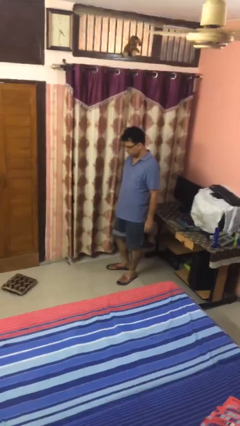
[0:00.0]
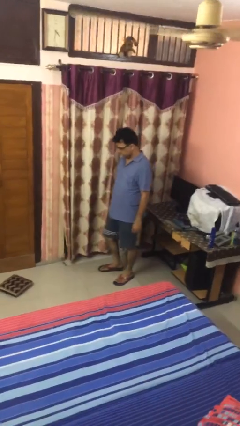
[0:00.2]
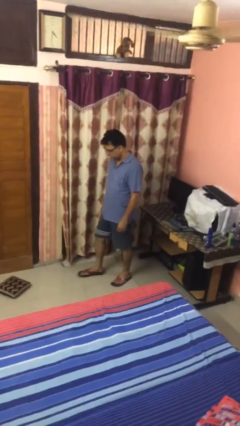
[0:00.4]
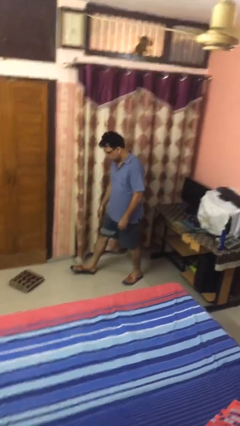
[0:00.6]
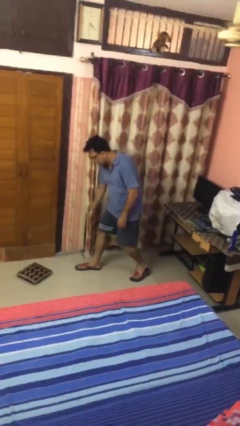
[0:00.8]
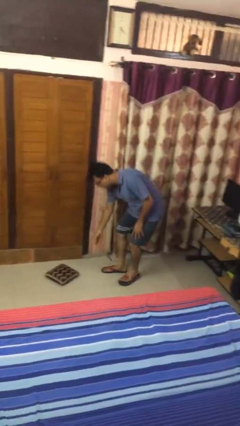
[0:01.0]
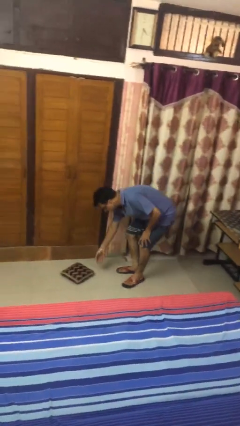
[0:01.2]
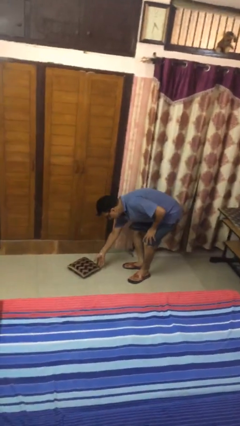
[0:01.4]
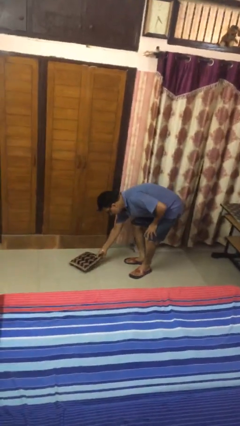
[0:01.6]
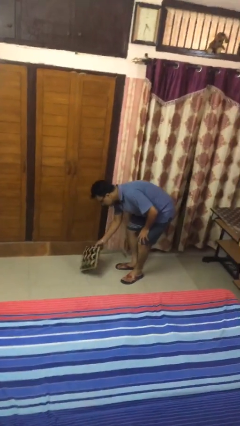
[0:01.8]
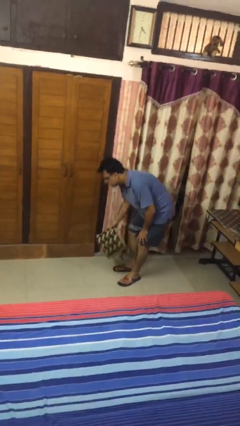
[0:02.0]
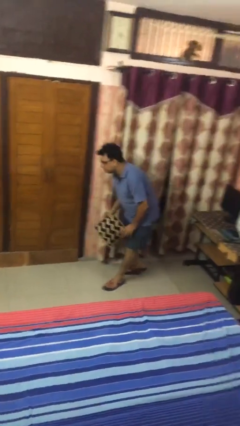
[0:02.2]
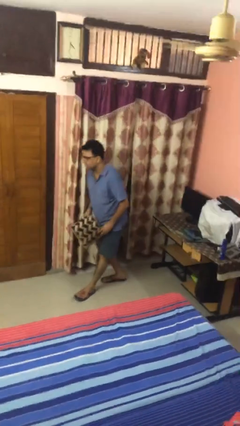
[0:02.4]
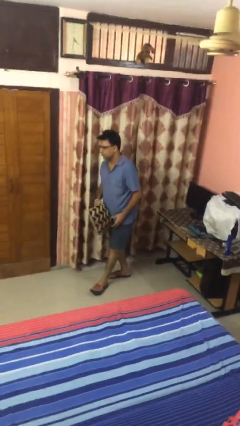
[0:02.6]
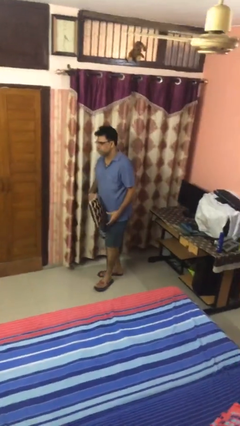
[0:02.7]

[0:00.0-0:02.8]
person picks up object from floor

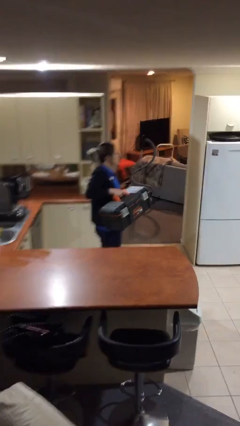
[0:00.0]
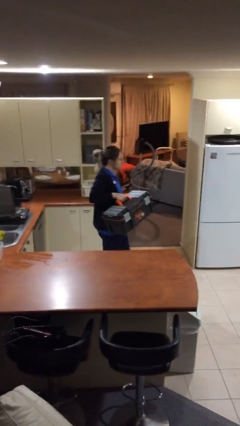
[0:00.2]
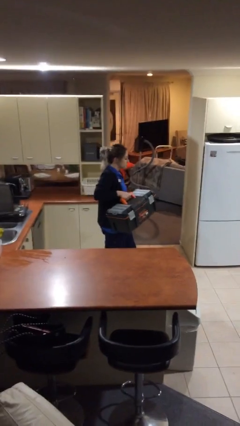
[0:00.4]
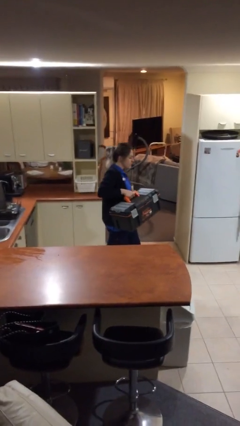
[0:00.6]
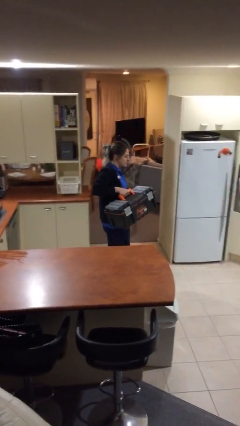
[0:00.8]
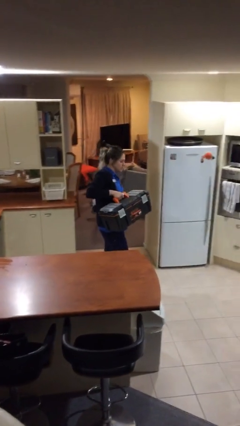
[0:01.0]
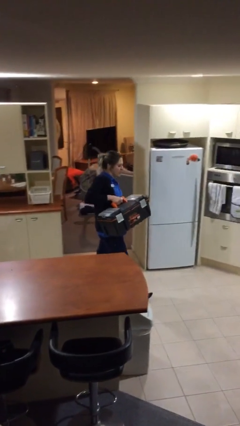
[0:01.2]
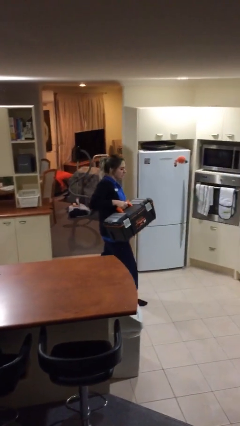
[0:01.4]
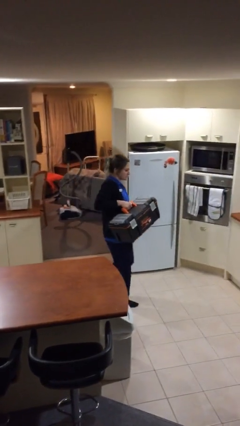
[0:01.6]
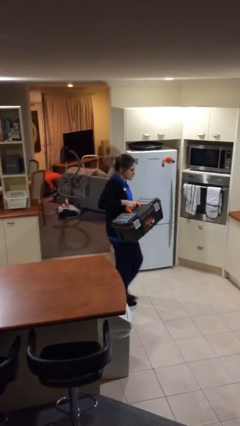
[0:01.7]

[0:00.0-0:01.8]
person carries heavy object

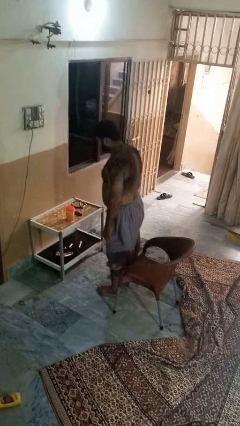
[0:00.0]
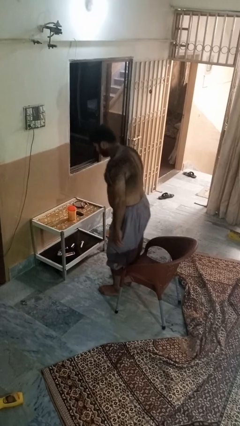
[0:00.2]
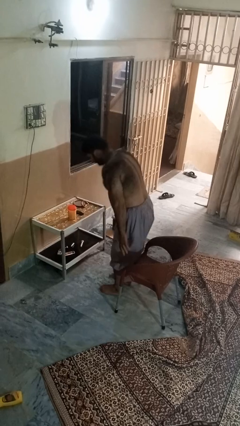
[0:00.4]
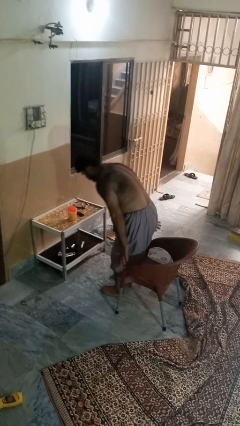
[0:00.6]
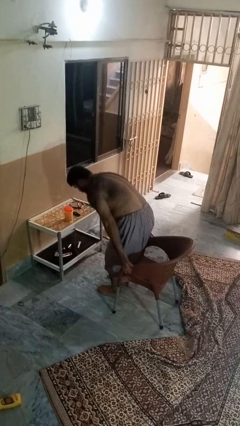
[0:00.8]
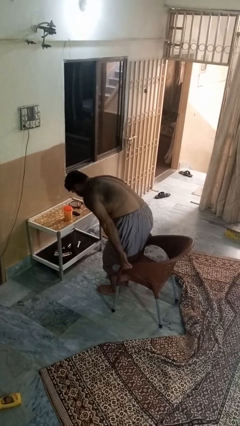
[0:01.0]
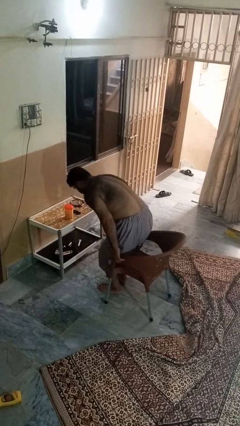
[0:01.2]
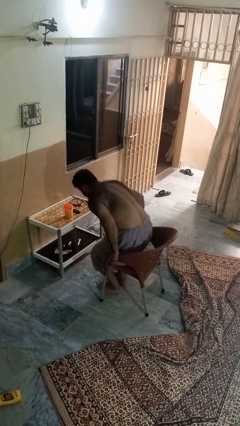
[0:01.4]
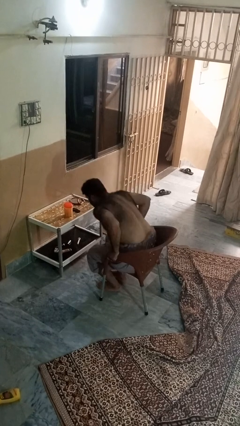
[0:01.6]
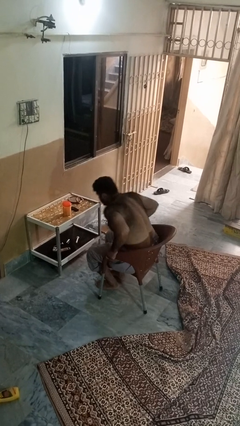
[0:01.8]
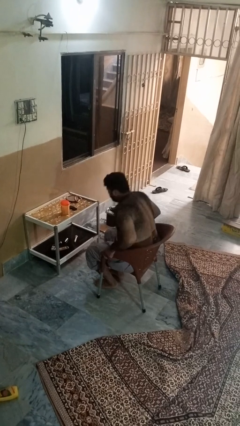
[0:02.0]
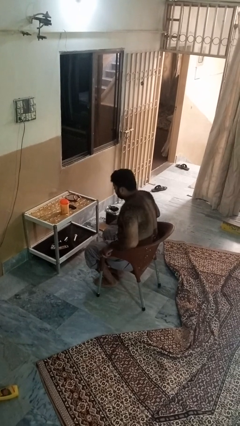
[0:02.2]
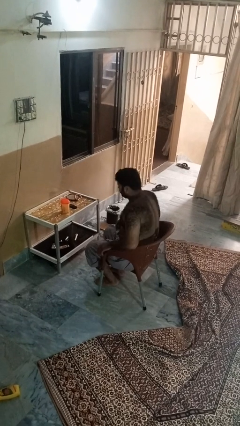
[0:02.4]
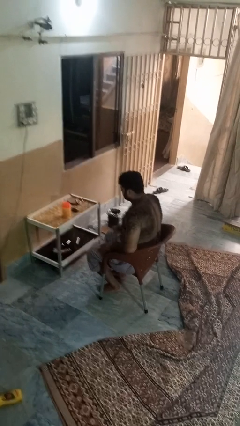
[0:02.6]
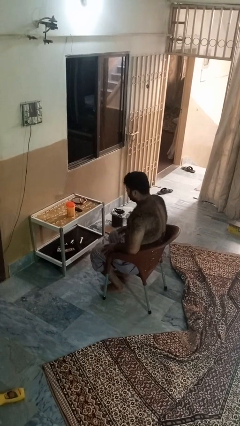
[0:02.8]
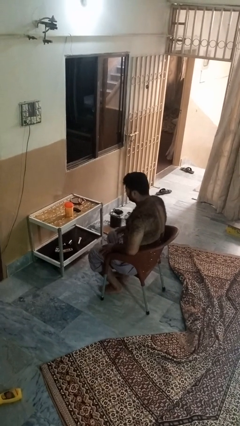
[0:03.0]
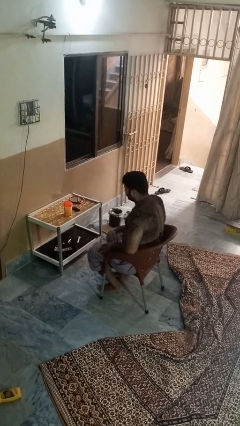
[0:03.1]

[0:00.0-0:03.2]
person sits down

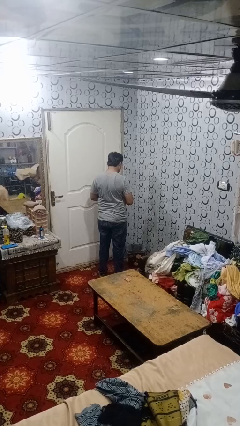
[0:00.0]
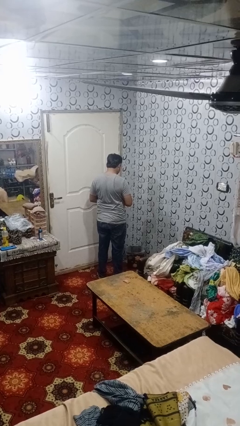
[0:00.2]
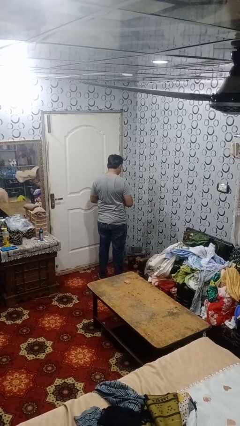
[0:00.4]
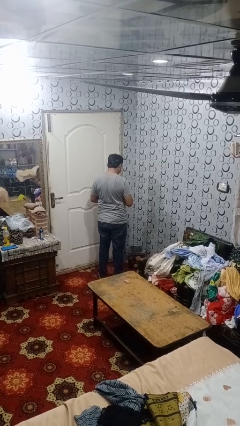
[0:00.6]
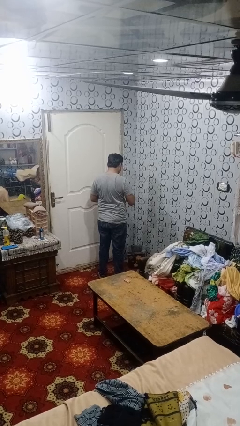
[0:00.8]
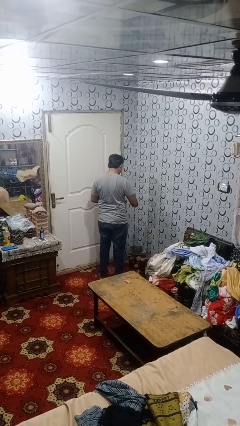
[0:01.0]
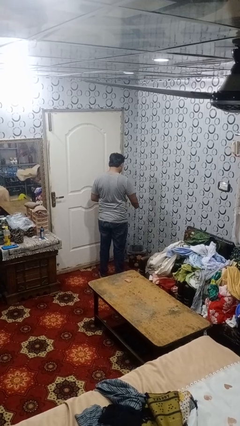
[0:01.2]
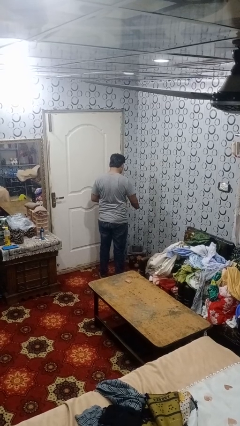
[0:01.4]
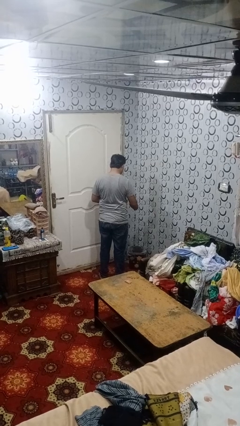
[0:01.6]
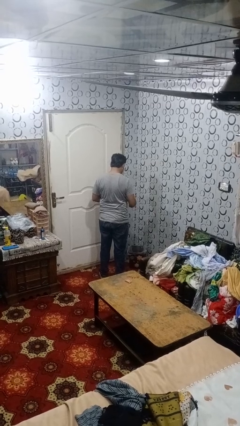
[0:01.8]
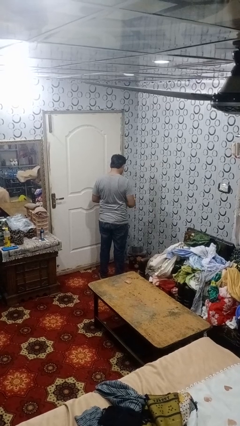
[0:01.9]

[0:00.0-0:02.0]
person discards trash

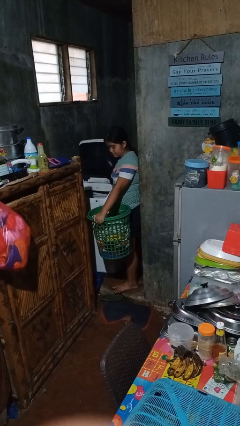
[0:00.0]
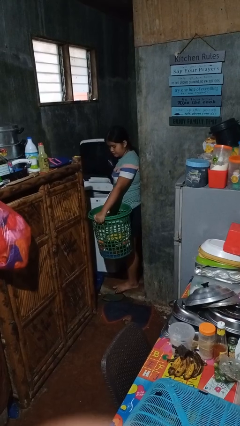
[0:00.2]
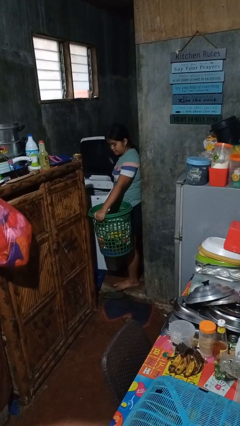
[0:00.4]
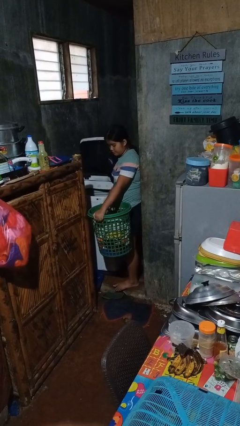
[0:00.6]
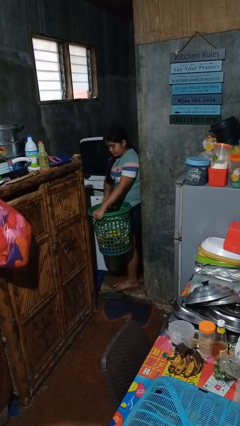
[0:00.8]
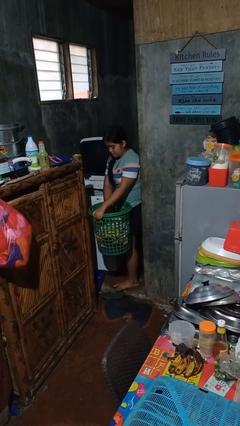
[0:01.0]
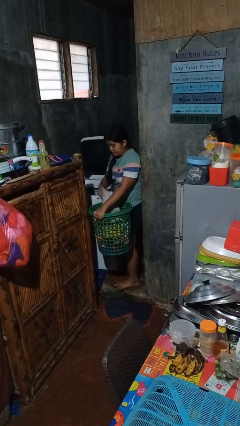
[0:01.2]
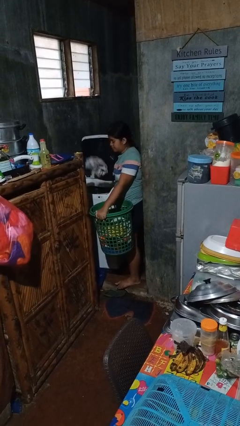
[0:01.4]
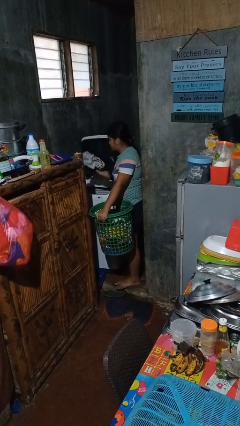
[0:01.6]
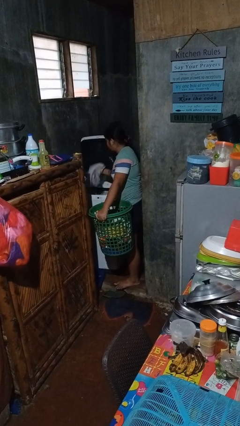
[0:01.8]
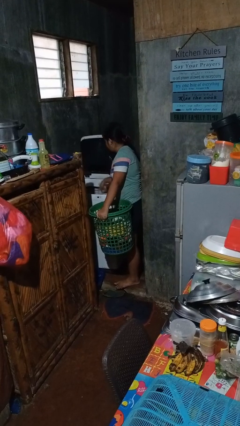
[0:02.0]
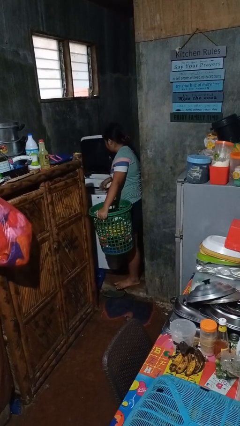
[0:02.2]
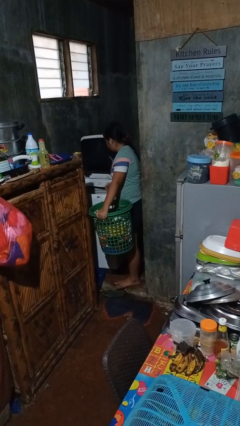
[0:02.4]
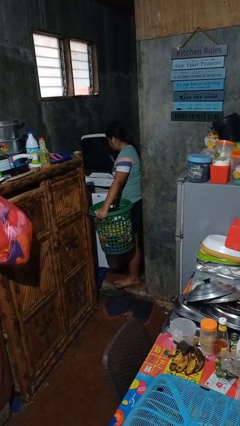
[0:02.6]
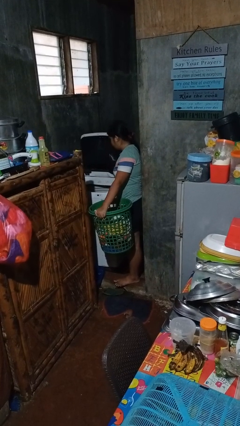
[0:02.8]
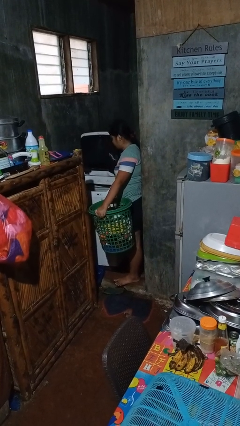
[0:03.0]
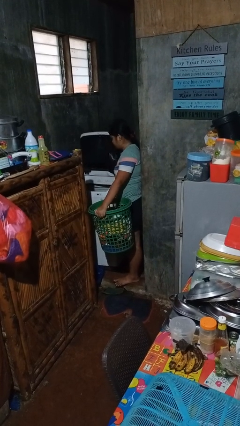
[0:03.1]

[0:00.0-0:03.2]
person loads clotheswasher

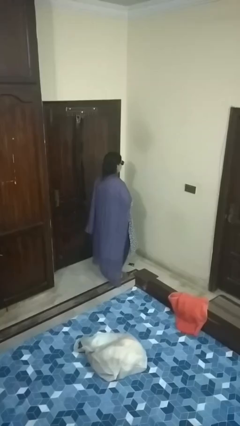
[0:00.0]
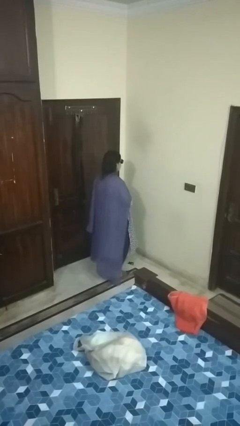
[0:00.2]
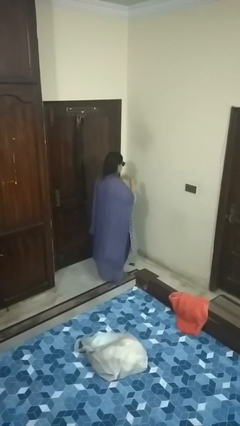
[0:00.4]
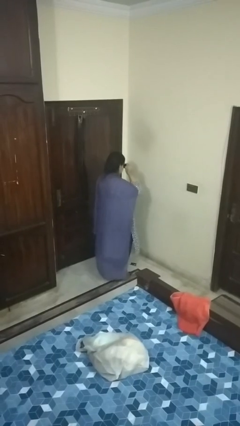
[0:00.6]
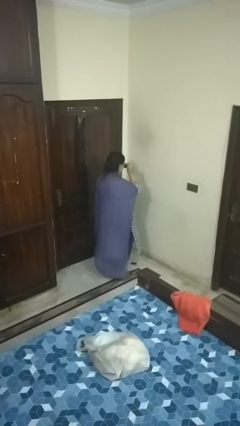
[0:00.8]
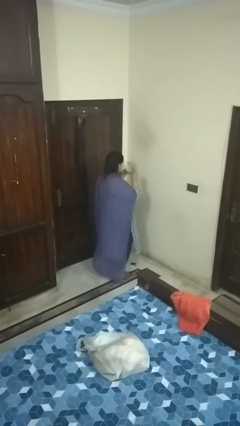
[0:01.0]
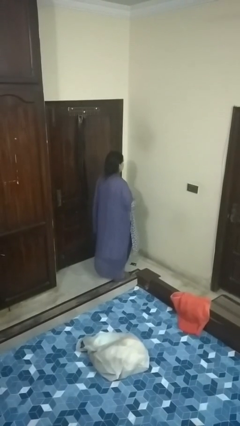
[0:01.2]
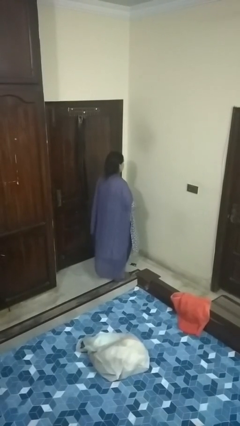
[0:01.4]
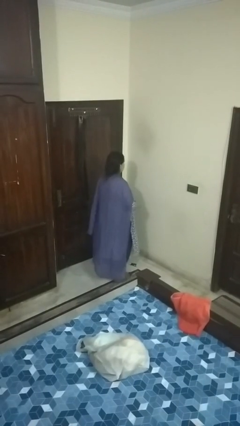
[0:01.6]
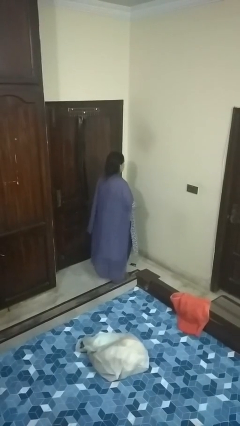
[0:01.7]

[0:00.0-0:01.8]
person takes off sunglasses

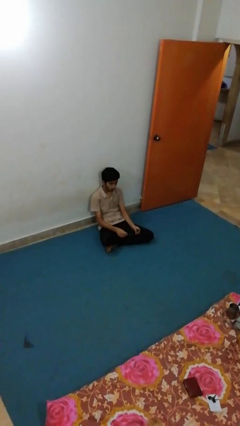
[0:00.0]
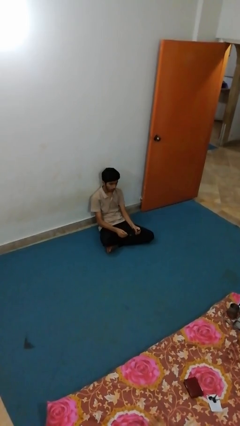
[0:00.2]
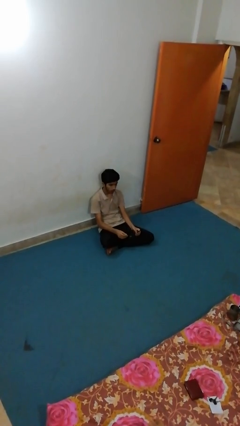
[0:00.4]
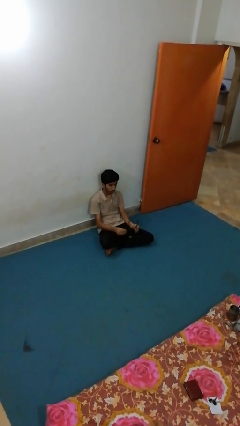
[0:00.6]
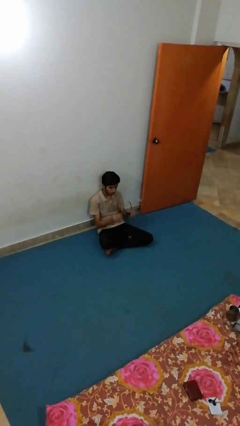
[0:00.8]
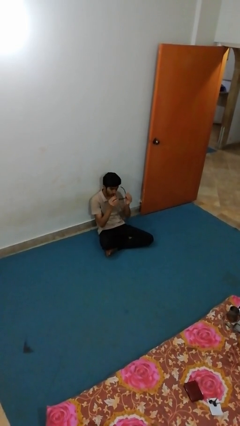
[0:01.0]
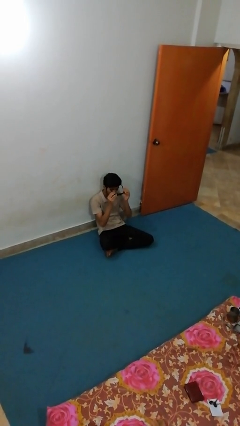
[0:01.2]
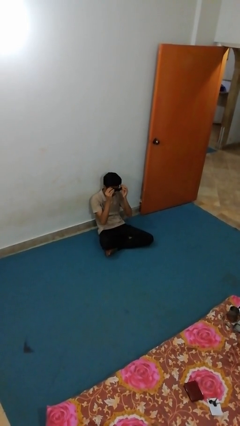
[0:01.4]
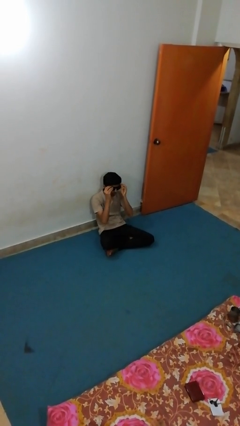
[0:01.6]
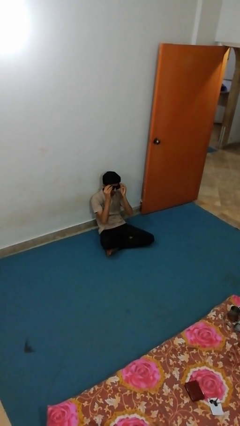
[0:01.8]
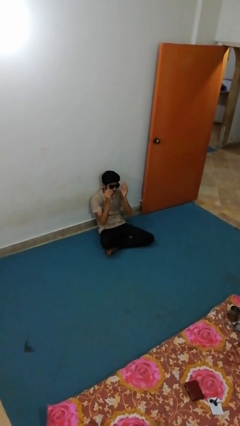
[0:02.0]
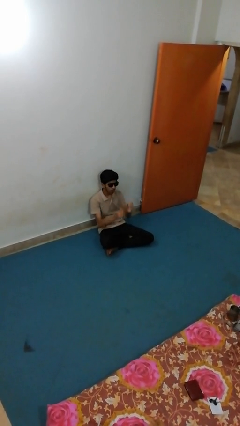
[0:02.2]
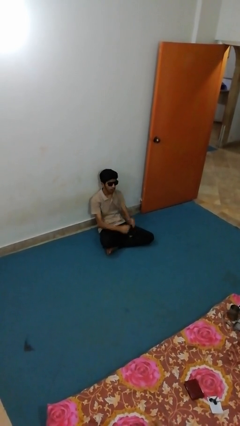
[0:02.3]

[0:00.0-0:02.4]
person puts on sunglasses
